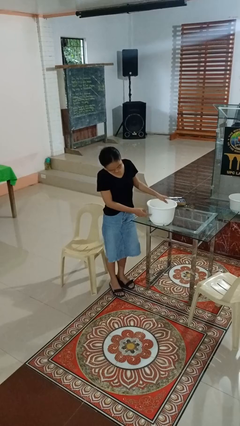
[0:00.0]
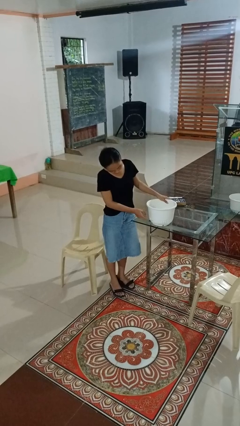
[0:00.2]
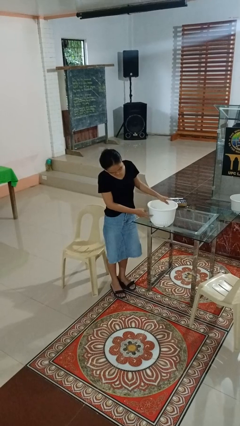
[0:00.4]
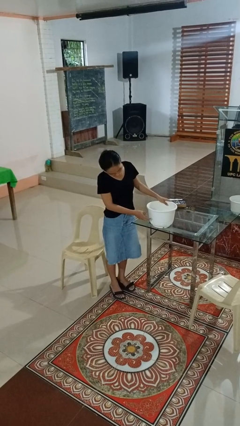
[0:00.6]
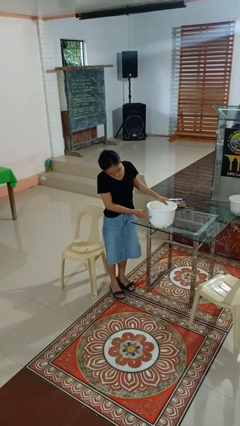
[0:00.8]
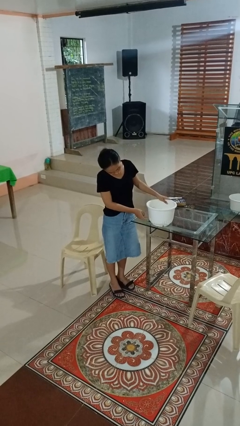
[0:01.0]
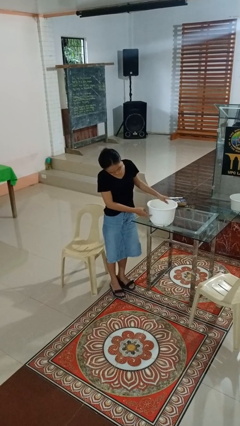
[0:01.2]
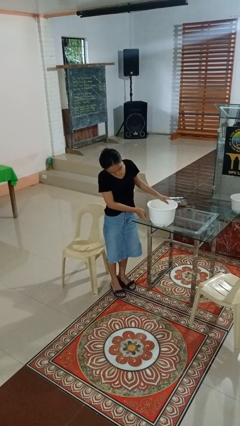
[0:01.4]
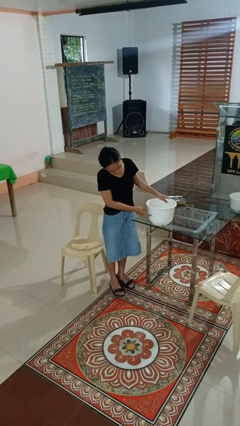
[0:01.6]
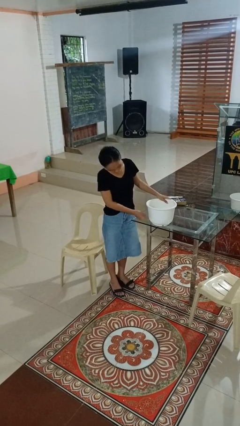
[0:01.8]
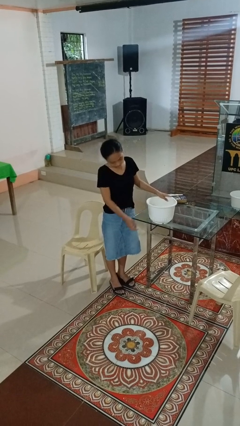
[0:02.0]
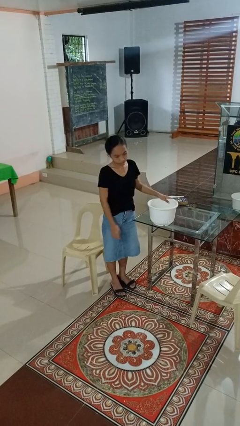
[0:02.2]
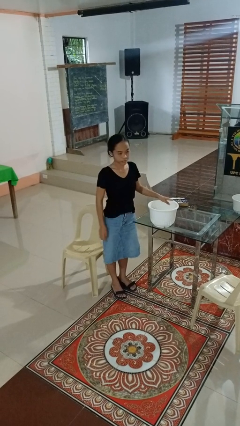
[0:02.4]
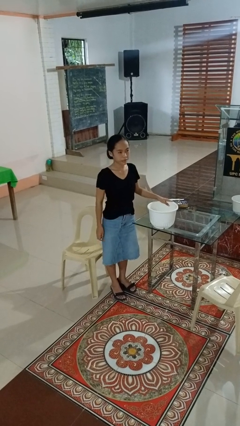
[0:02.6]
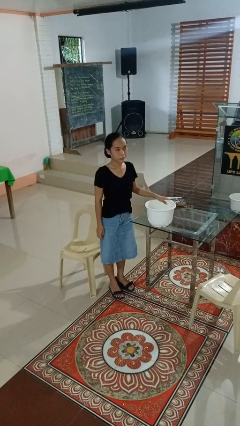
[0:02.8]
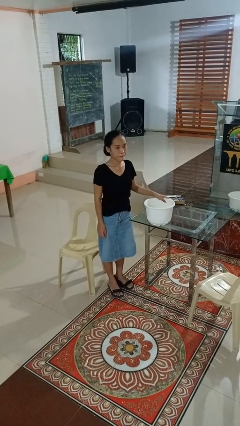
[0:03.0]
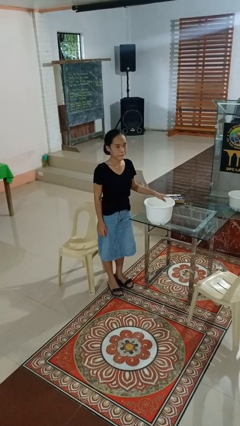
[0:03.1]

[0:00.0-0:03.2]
person taps object with finger

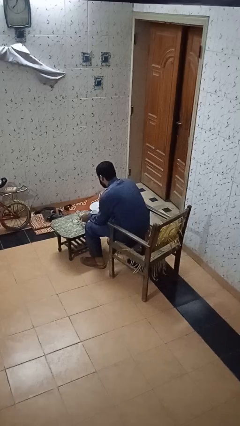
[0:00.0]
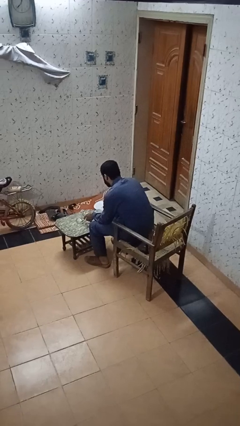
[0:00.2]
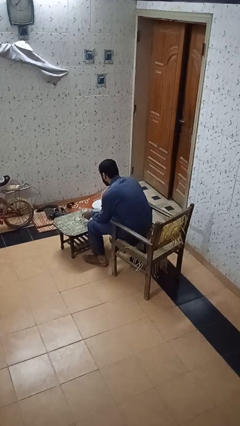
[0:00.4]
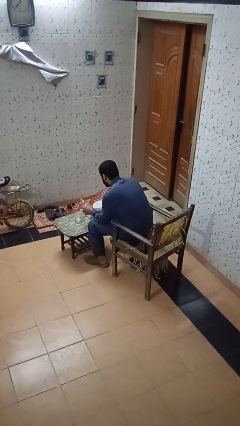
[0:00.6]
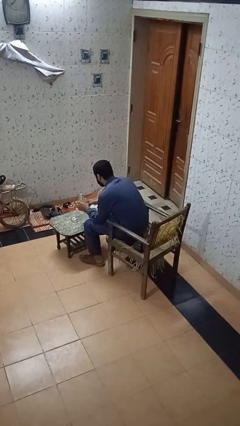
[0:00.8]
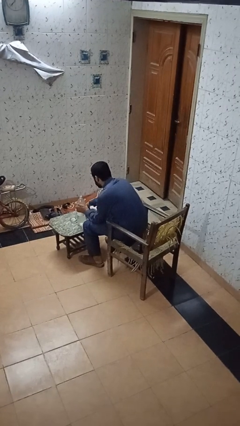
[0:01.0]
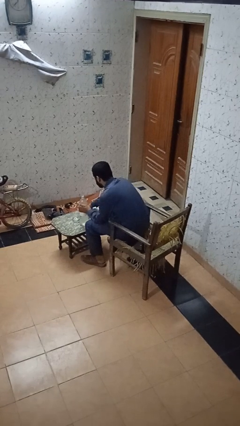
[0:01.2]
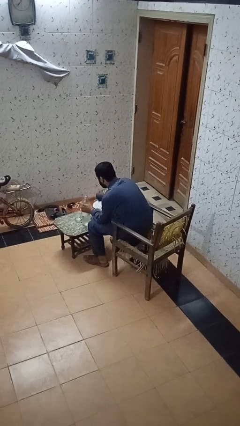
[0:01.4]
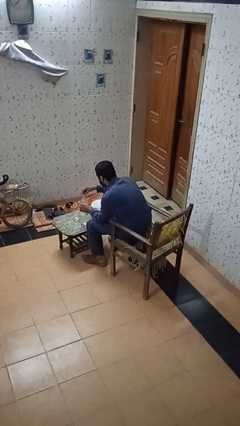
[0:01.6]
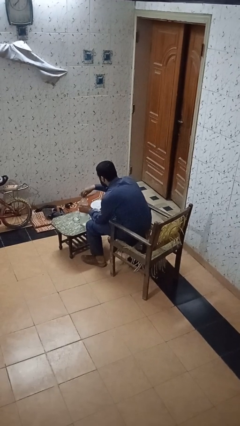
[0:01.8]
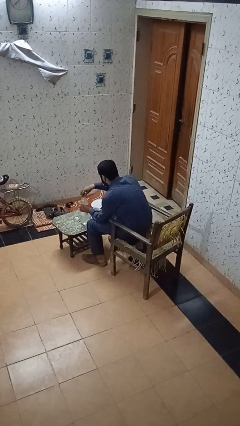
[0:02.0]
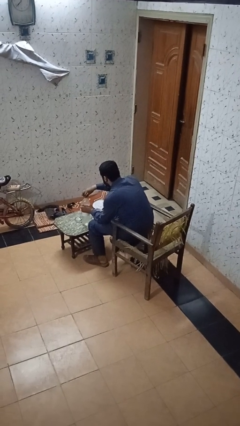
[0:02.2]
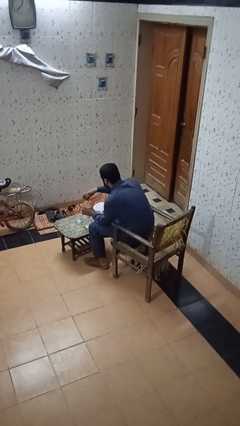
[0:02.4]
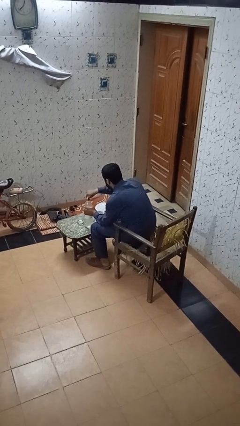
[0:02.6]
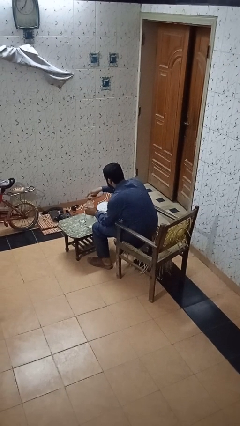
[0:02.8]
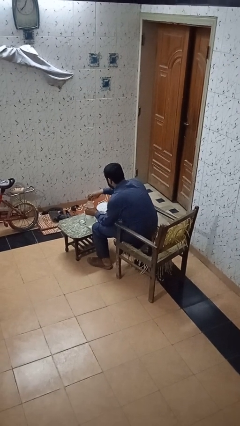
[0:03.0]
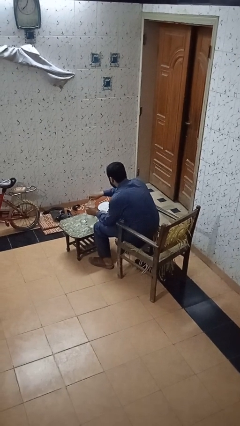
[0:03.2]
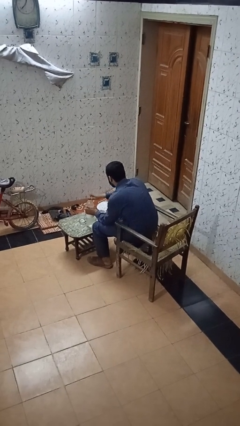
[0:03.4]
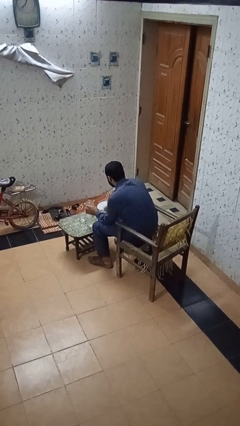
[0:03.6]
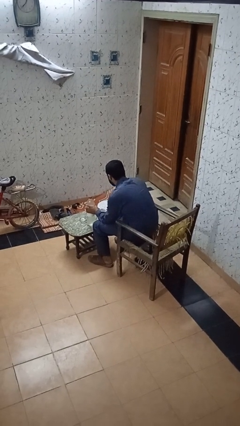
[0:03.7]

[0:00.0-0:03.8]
person screws lid to bottle

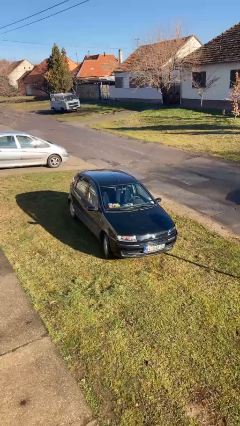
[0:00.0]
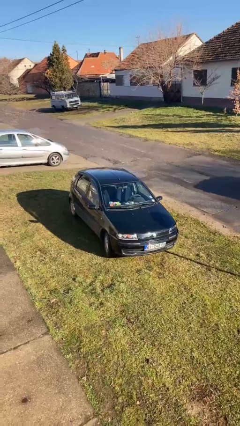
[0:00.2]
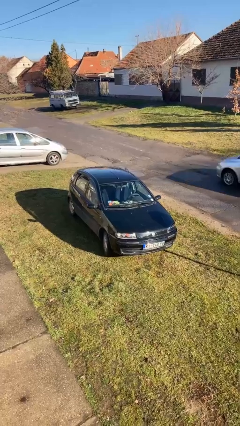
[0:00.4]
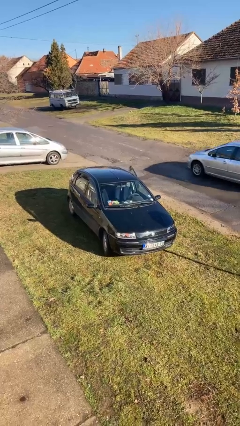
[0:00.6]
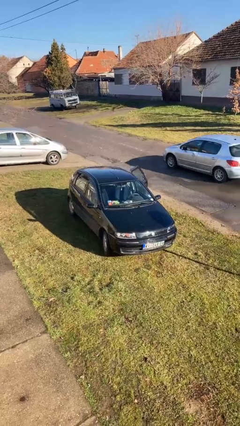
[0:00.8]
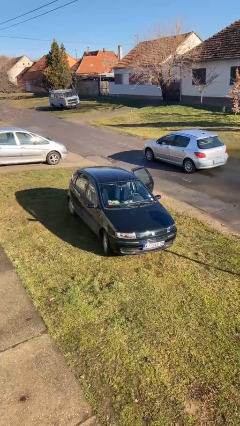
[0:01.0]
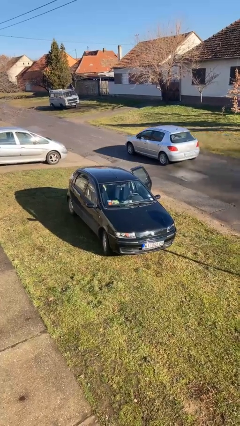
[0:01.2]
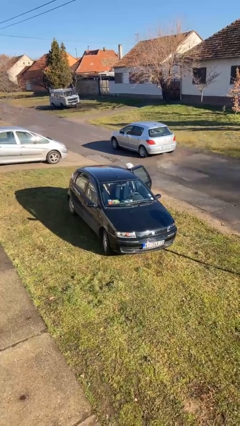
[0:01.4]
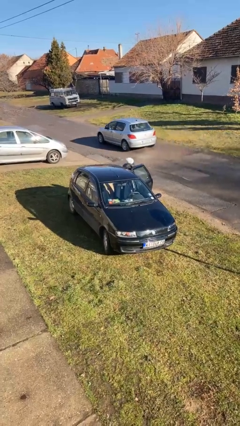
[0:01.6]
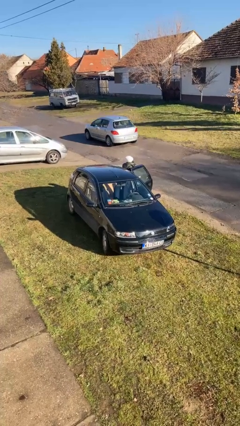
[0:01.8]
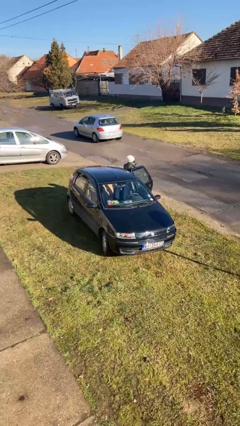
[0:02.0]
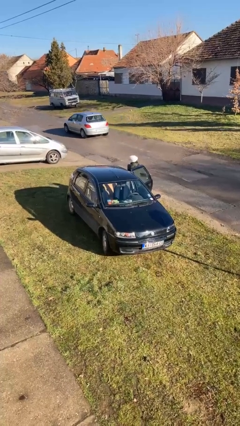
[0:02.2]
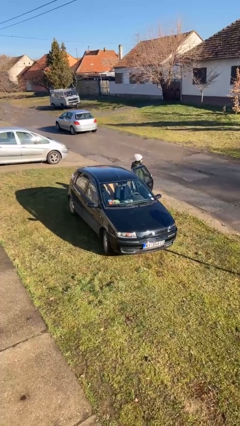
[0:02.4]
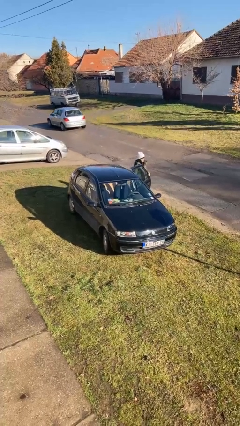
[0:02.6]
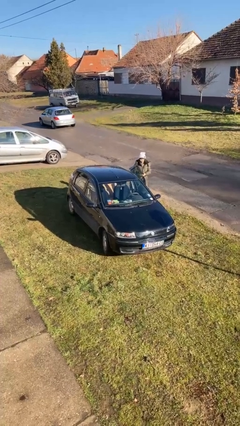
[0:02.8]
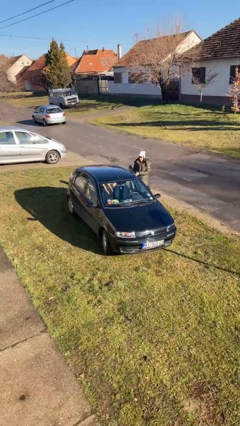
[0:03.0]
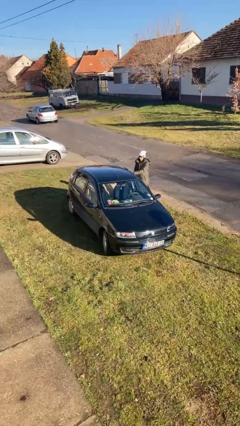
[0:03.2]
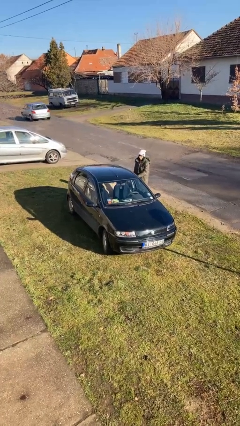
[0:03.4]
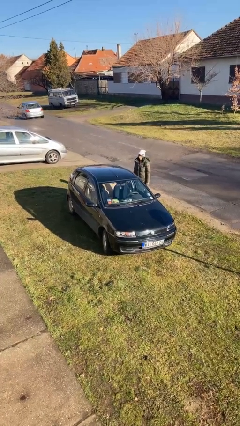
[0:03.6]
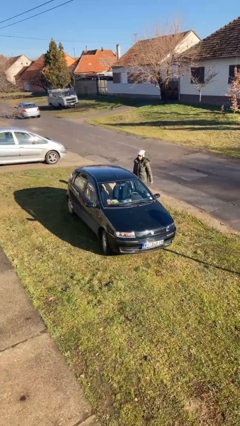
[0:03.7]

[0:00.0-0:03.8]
car drops off person

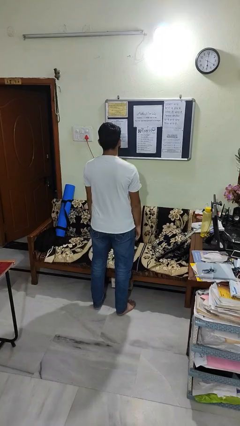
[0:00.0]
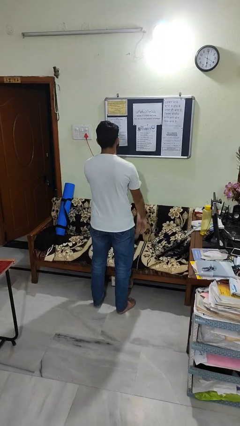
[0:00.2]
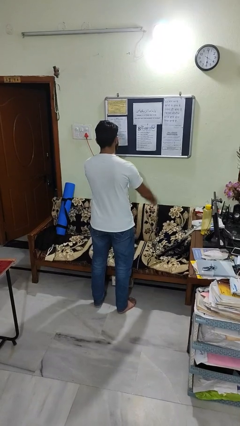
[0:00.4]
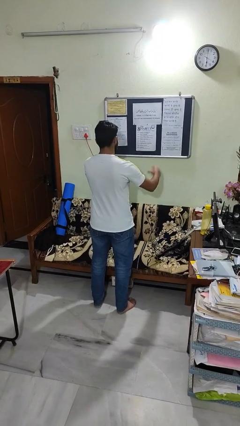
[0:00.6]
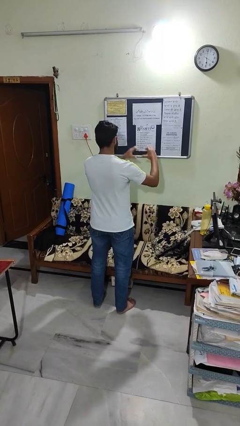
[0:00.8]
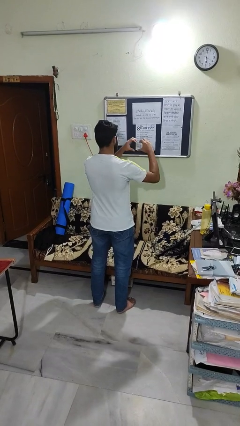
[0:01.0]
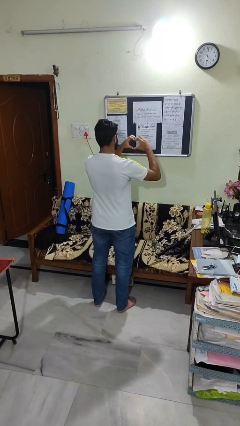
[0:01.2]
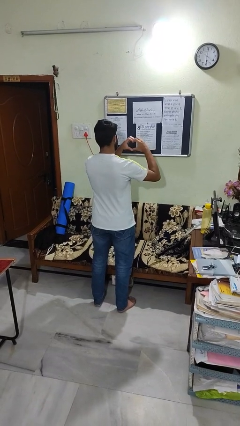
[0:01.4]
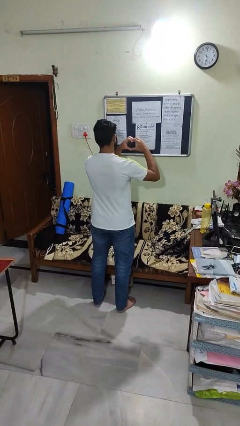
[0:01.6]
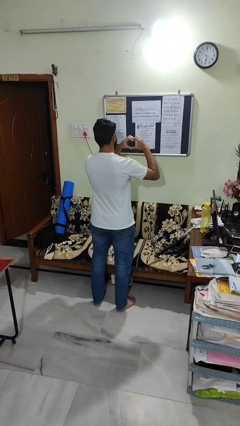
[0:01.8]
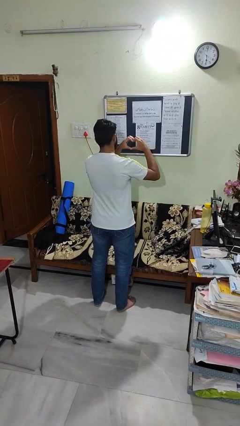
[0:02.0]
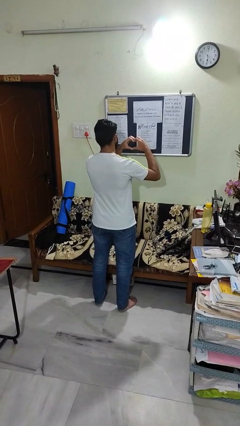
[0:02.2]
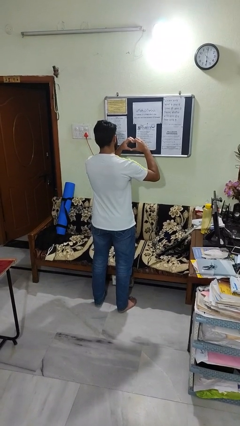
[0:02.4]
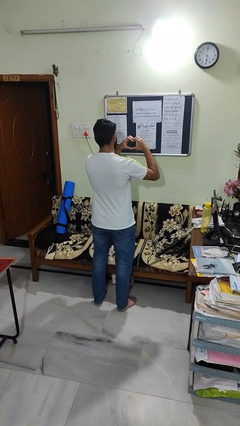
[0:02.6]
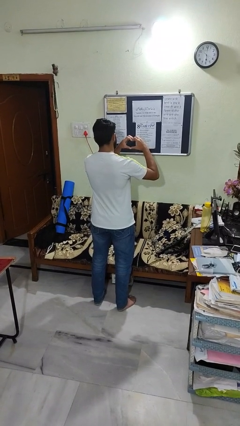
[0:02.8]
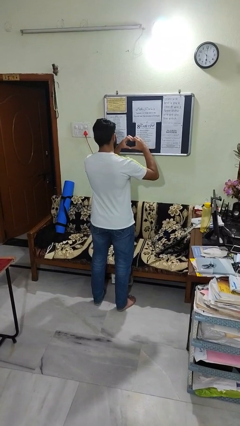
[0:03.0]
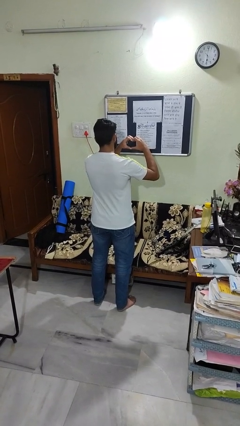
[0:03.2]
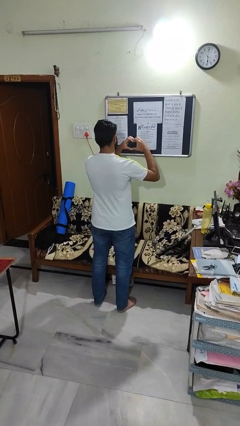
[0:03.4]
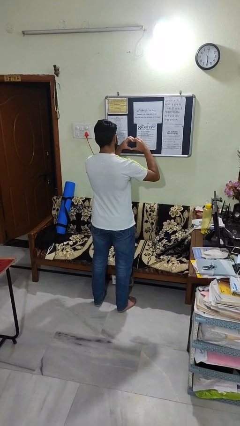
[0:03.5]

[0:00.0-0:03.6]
person gestures heart

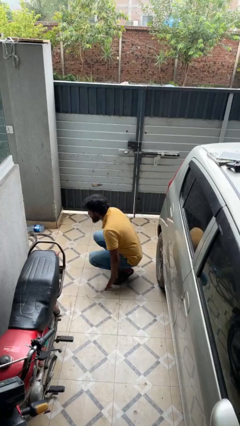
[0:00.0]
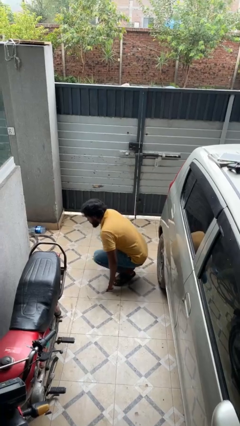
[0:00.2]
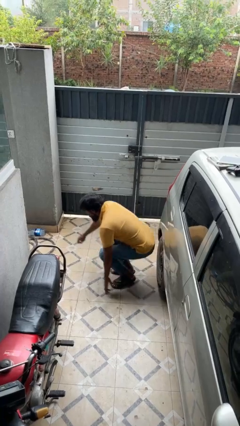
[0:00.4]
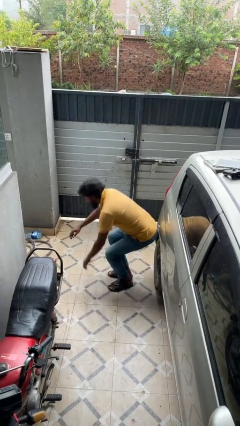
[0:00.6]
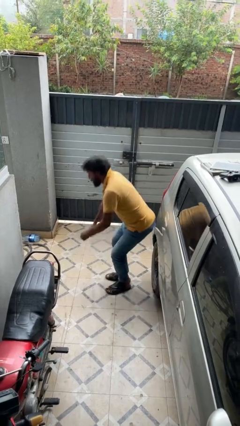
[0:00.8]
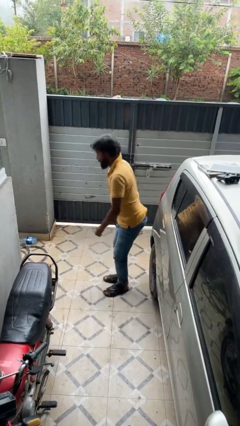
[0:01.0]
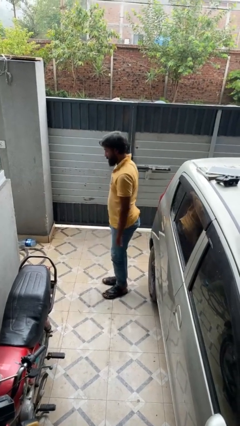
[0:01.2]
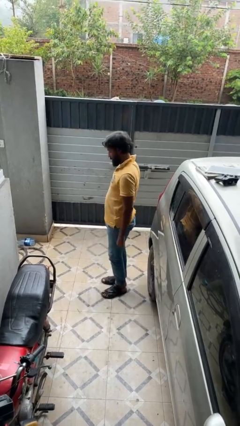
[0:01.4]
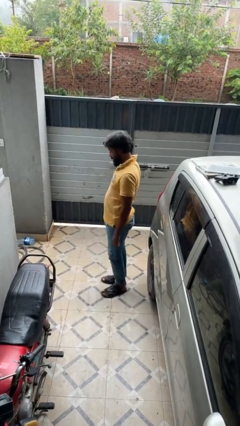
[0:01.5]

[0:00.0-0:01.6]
person stands up

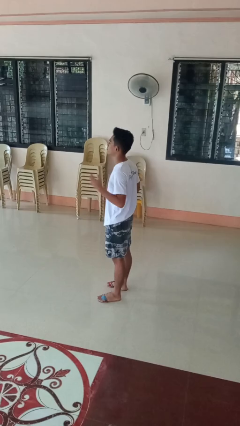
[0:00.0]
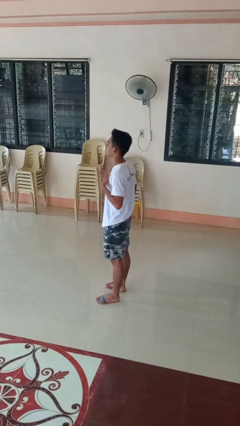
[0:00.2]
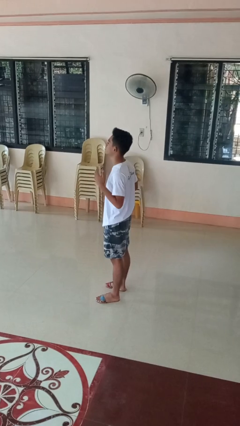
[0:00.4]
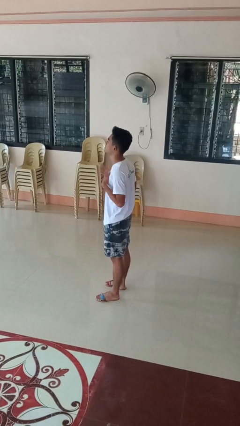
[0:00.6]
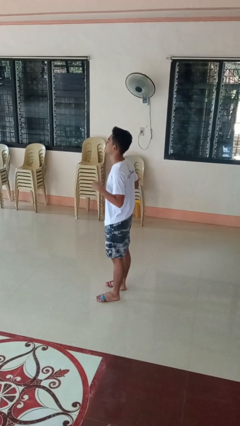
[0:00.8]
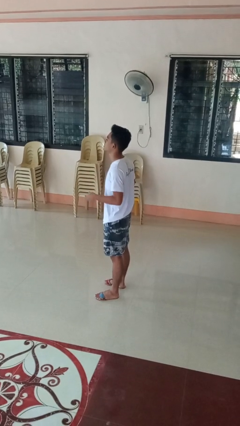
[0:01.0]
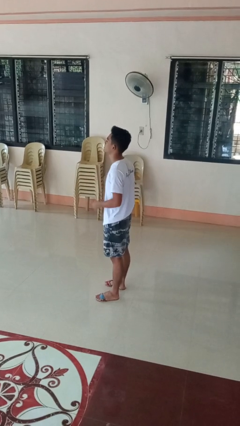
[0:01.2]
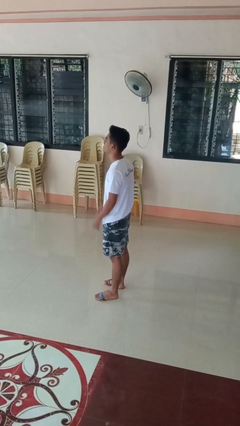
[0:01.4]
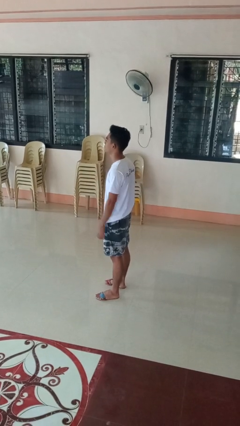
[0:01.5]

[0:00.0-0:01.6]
person drums on chest
